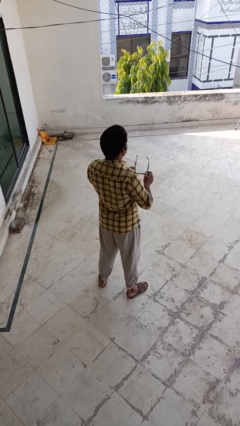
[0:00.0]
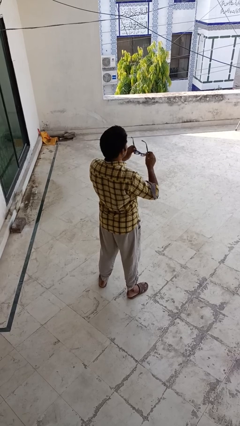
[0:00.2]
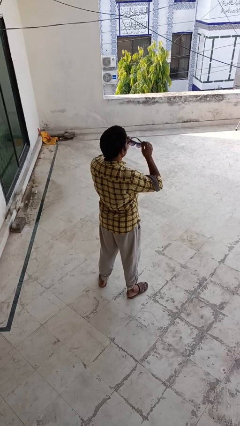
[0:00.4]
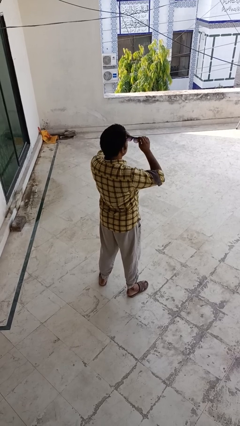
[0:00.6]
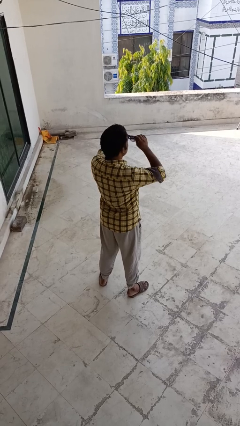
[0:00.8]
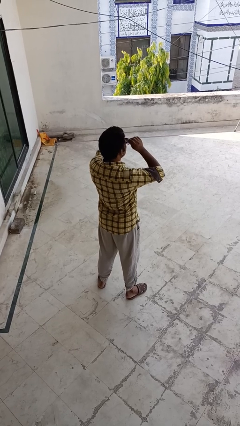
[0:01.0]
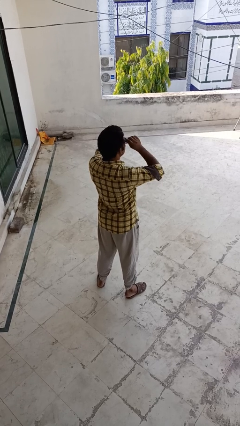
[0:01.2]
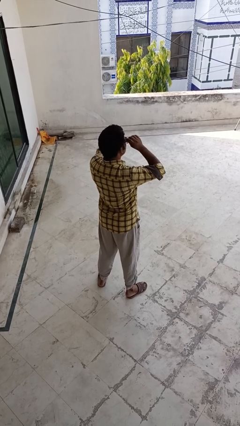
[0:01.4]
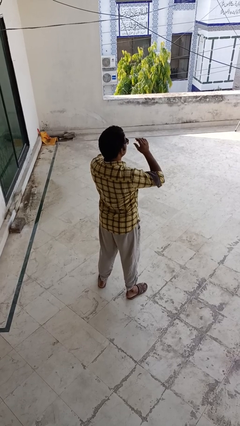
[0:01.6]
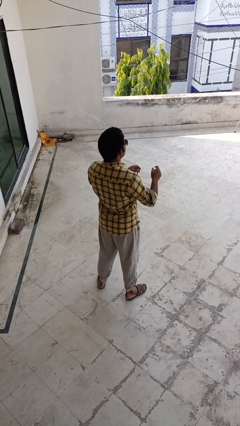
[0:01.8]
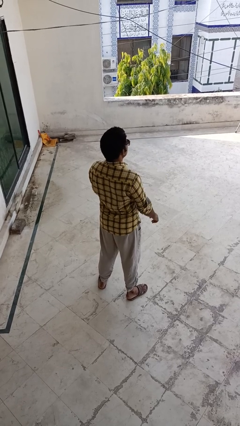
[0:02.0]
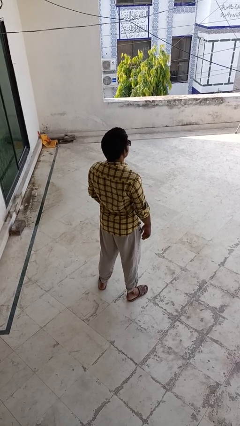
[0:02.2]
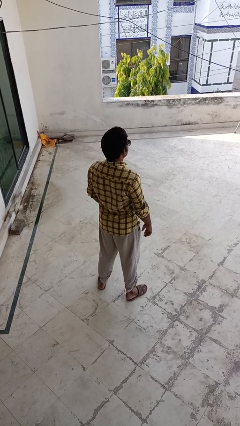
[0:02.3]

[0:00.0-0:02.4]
person puts on sunglasses

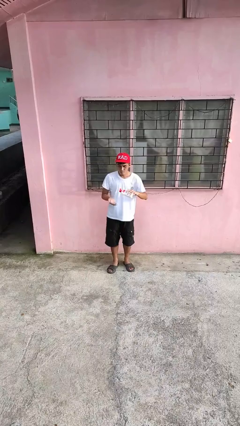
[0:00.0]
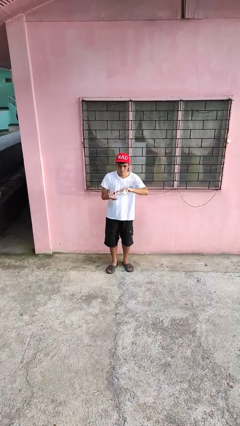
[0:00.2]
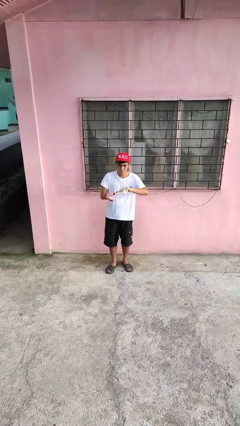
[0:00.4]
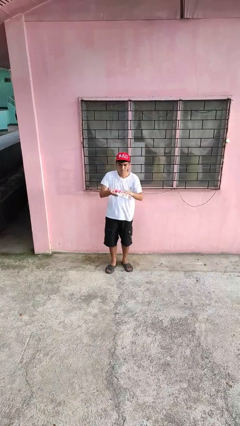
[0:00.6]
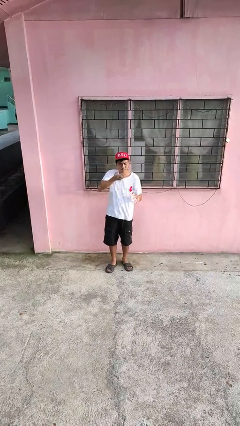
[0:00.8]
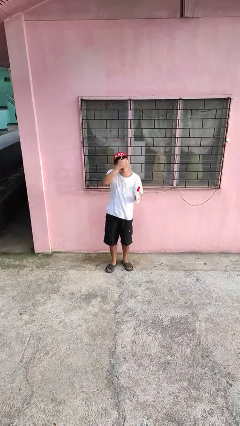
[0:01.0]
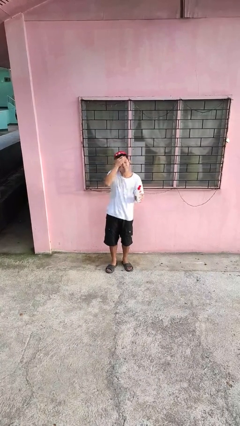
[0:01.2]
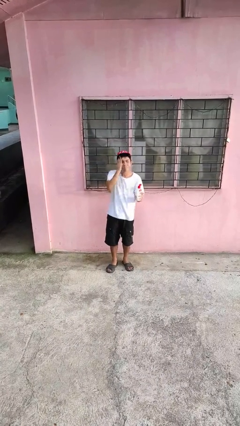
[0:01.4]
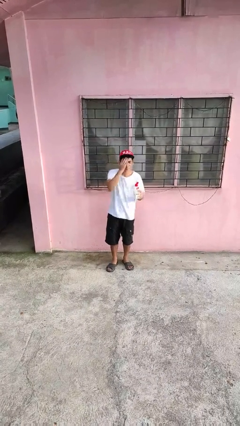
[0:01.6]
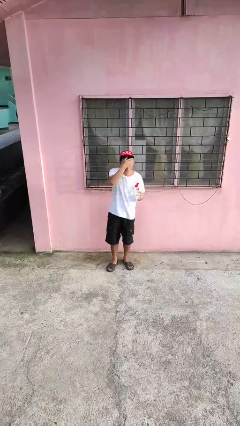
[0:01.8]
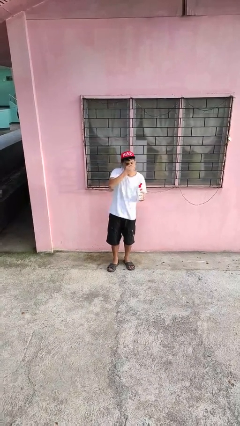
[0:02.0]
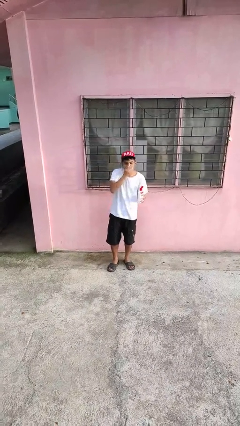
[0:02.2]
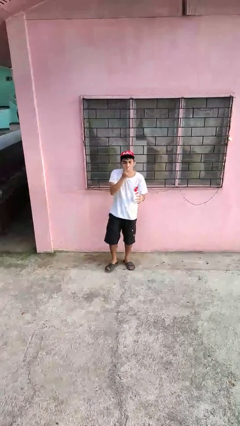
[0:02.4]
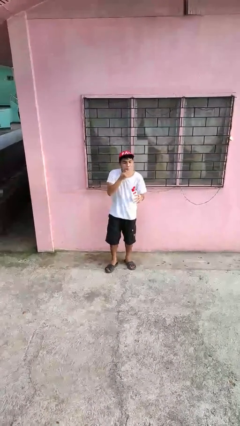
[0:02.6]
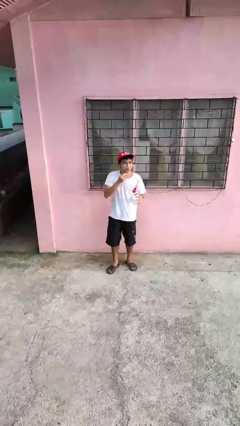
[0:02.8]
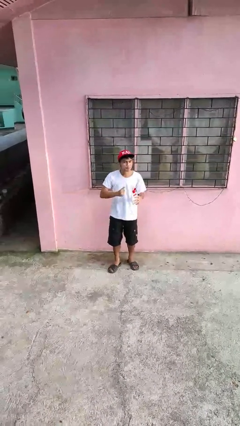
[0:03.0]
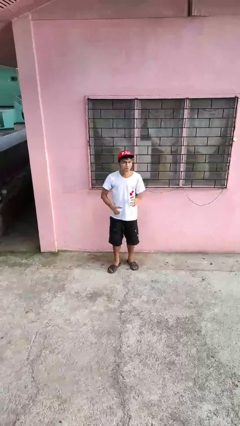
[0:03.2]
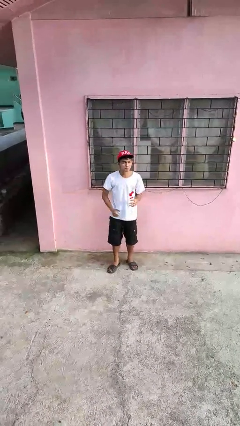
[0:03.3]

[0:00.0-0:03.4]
person applies facial moisturizer

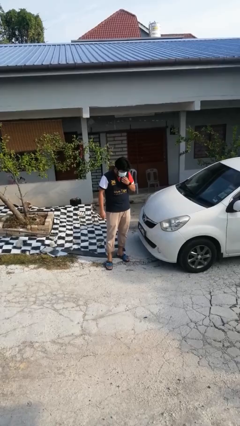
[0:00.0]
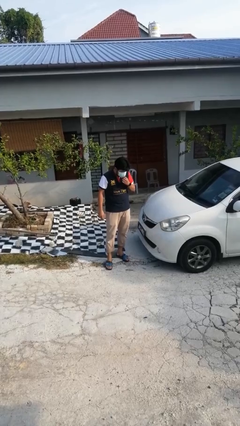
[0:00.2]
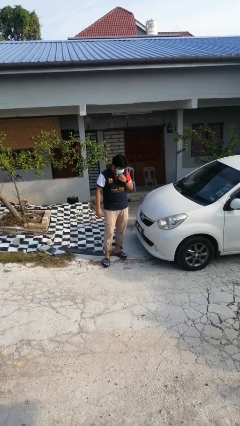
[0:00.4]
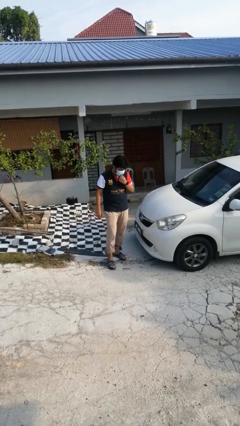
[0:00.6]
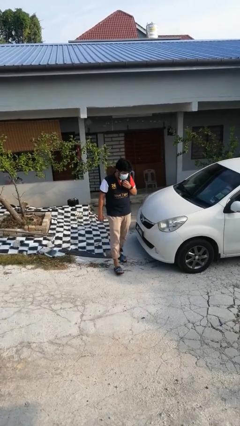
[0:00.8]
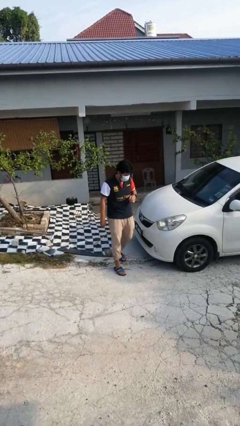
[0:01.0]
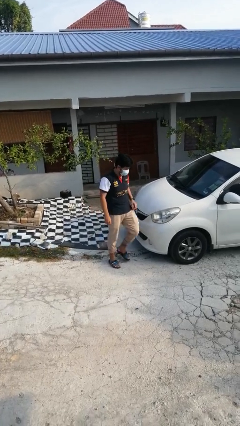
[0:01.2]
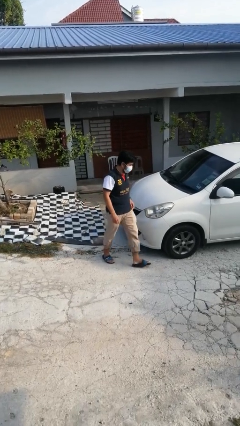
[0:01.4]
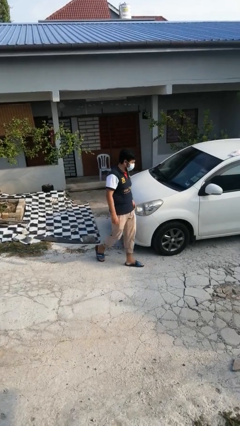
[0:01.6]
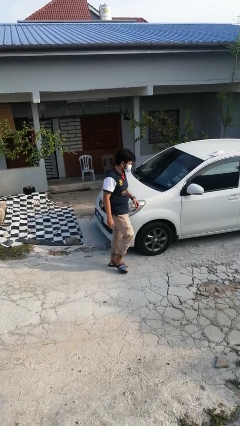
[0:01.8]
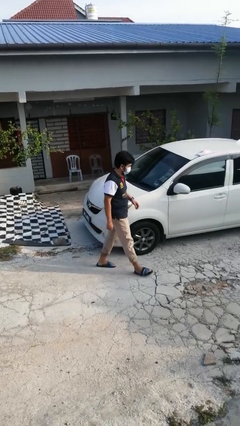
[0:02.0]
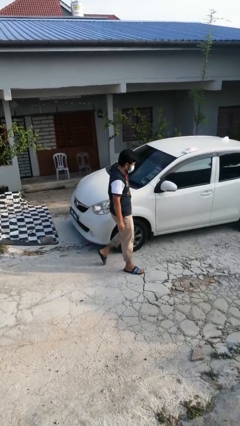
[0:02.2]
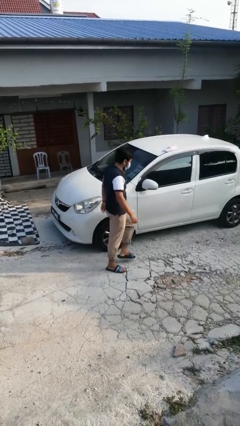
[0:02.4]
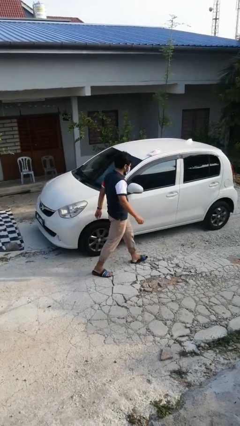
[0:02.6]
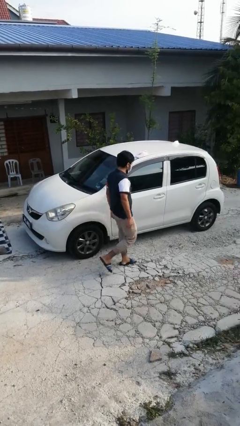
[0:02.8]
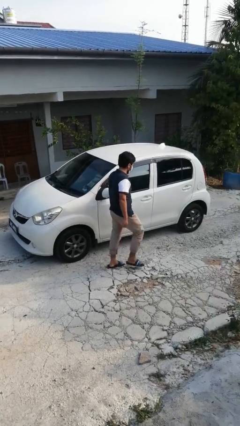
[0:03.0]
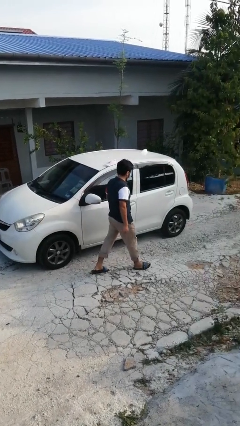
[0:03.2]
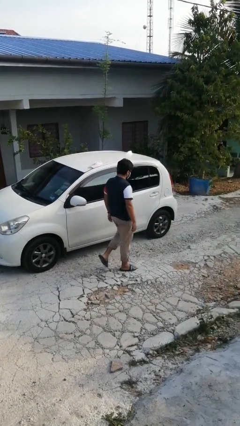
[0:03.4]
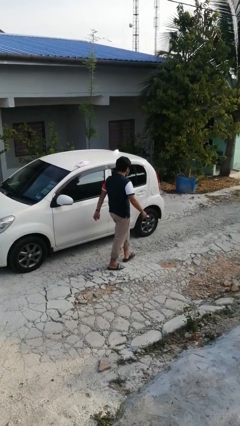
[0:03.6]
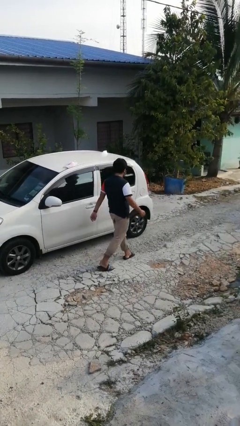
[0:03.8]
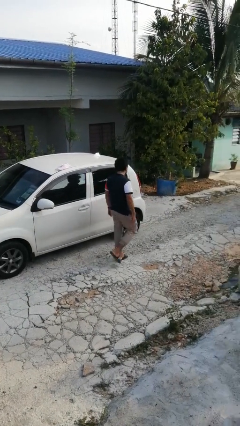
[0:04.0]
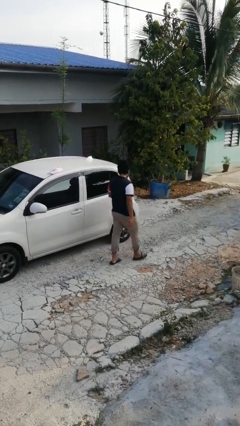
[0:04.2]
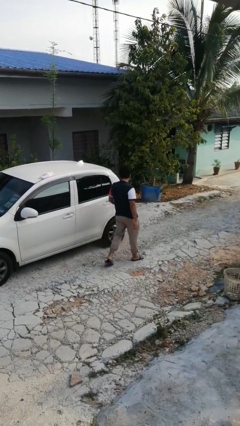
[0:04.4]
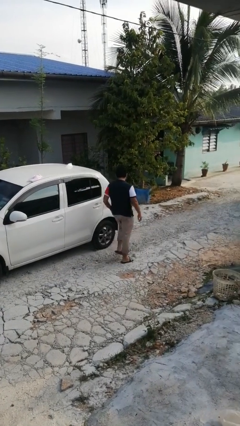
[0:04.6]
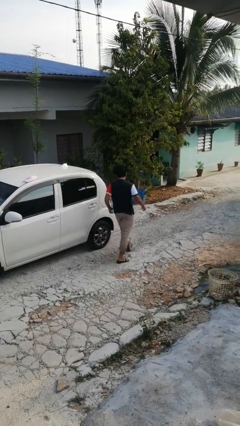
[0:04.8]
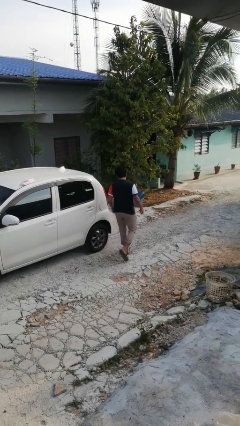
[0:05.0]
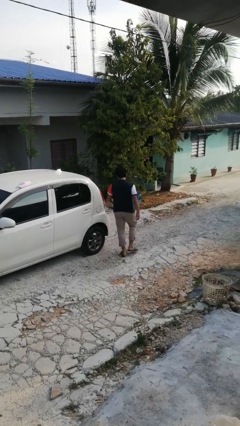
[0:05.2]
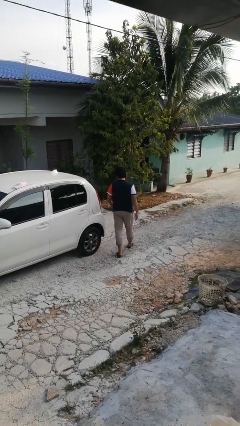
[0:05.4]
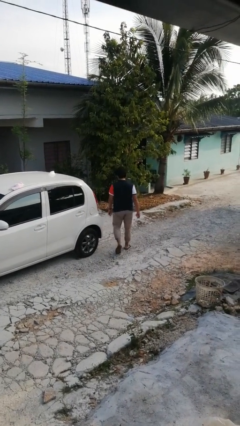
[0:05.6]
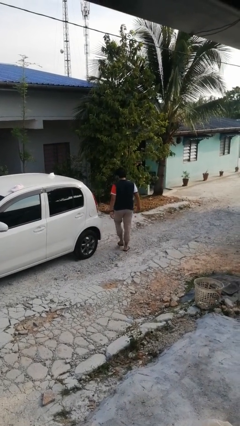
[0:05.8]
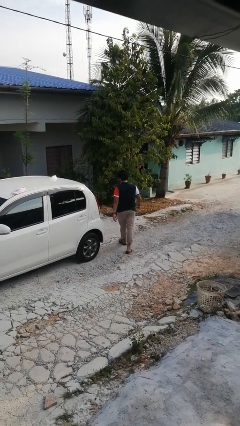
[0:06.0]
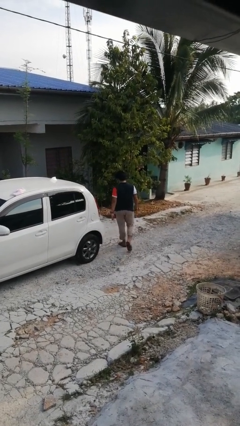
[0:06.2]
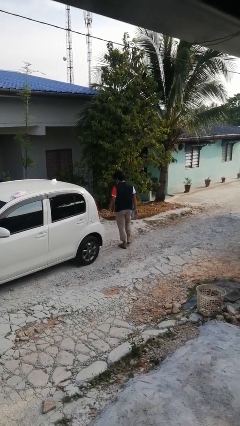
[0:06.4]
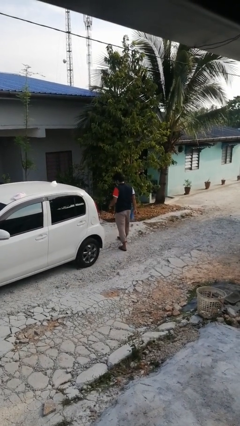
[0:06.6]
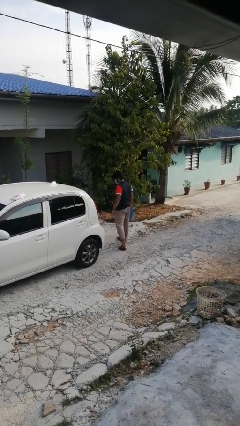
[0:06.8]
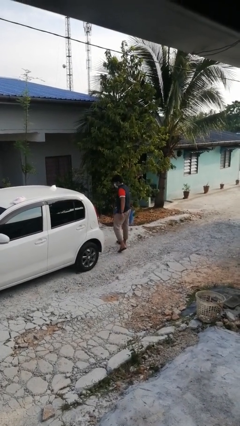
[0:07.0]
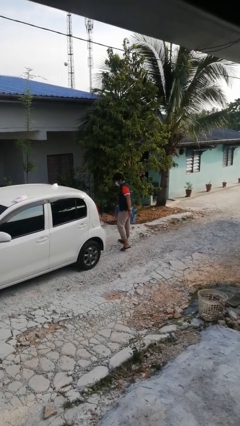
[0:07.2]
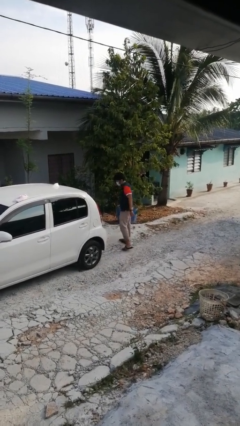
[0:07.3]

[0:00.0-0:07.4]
person walks around car

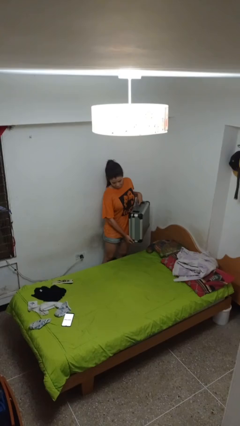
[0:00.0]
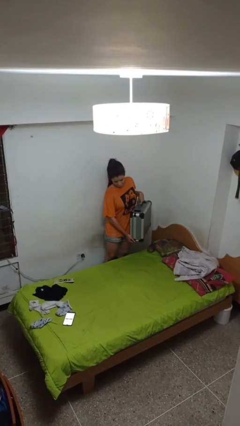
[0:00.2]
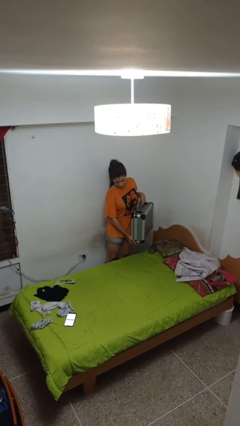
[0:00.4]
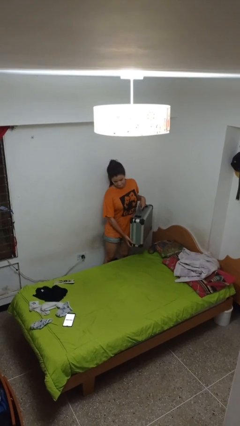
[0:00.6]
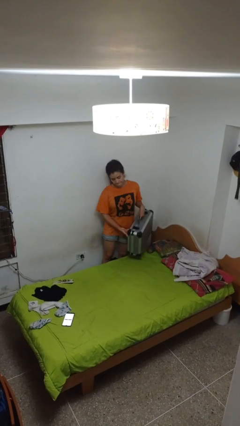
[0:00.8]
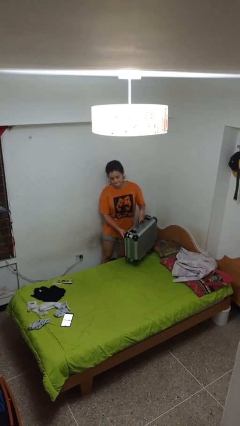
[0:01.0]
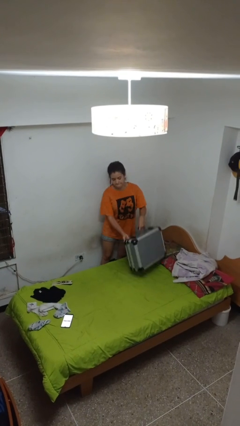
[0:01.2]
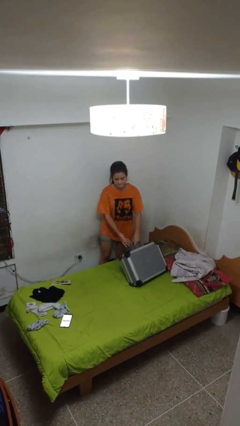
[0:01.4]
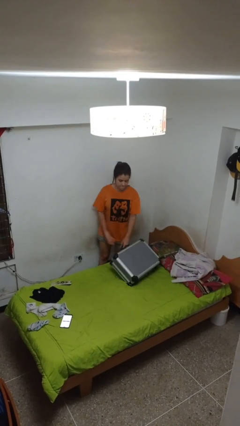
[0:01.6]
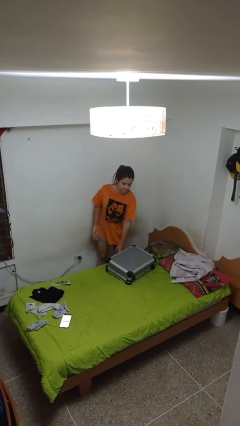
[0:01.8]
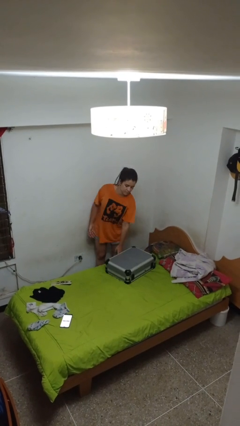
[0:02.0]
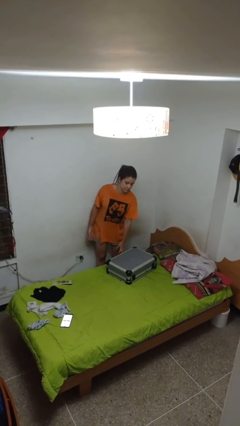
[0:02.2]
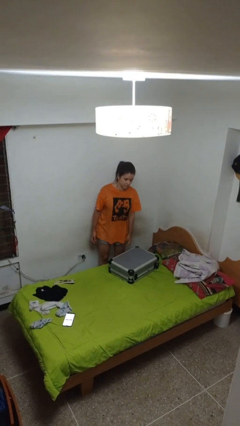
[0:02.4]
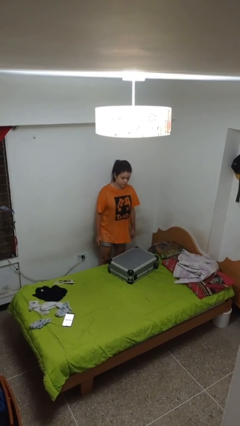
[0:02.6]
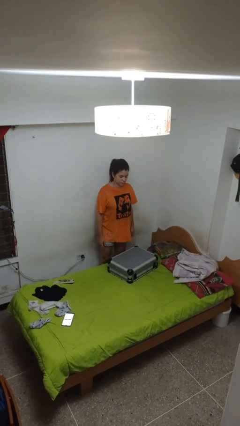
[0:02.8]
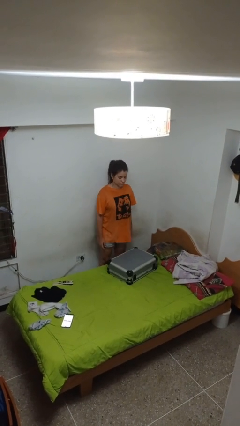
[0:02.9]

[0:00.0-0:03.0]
person puts down object on bed

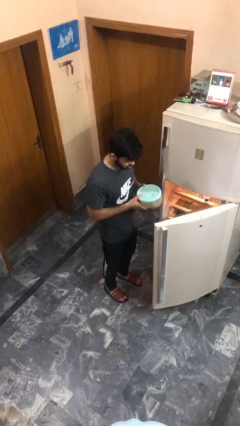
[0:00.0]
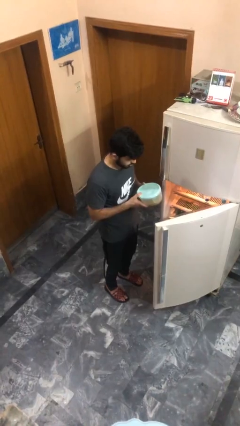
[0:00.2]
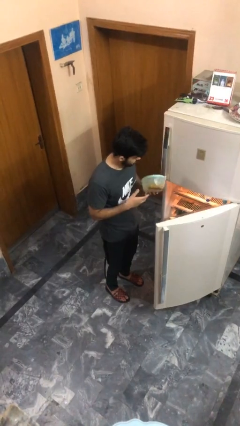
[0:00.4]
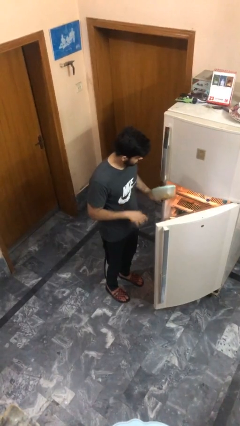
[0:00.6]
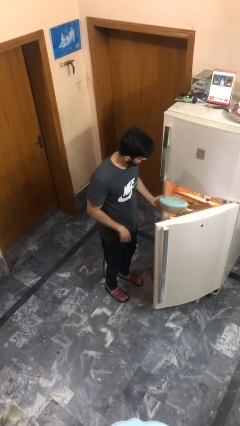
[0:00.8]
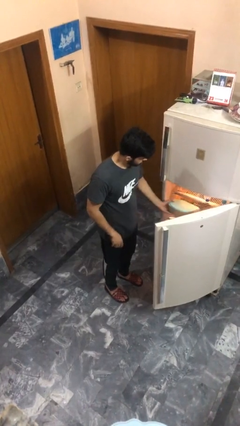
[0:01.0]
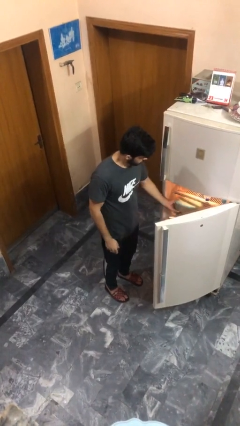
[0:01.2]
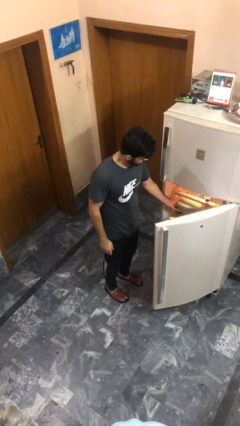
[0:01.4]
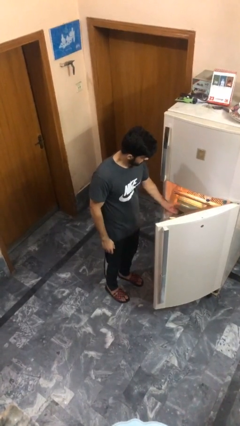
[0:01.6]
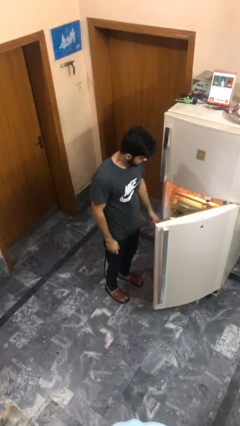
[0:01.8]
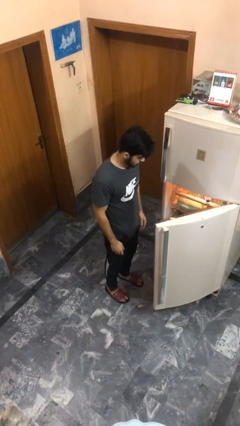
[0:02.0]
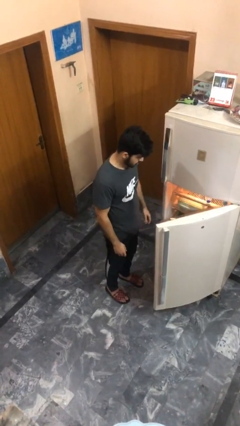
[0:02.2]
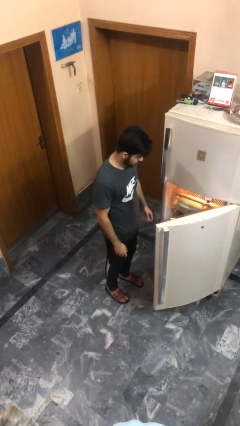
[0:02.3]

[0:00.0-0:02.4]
person puts down object into cabinet
